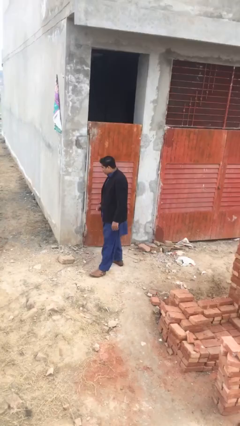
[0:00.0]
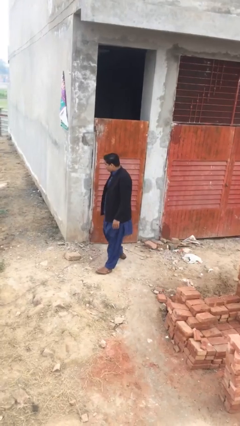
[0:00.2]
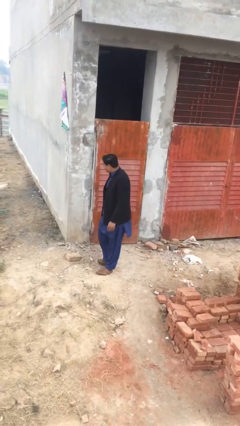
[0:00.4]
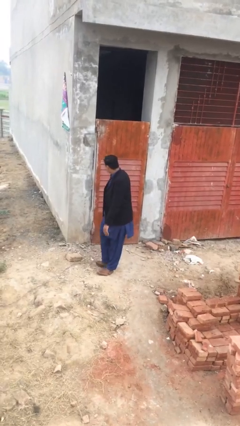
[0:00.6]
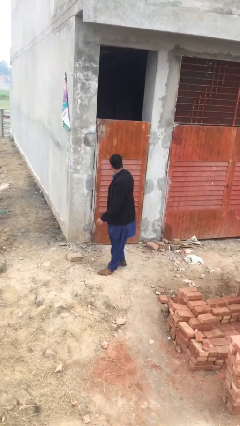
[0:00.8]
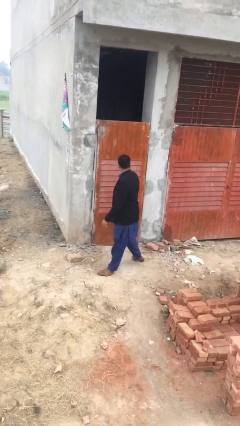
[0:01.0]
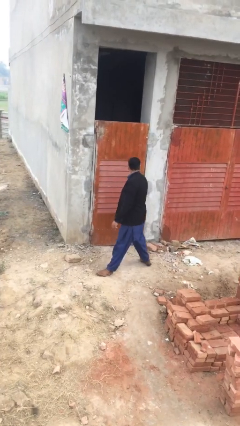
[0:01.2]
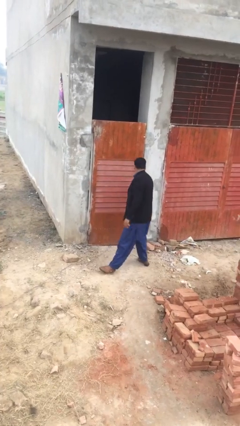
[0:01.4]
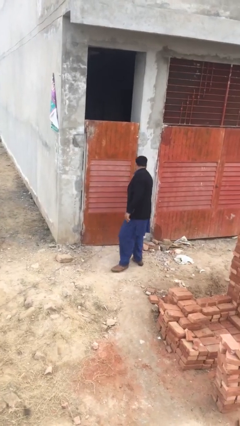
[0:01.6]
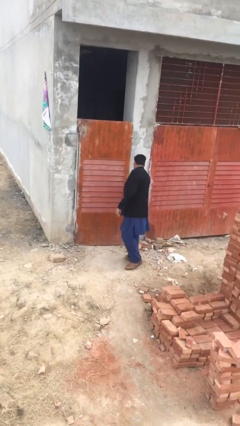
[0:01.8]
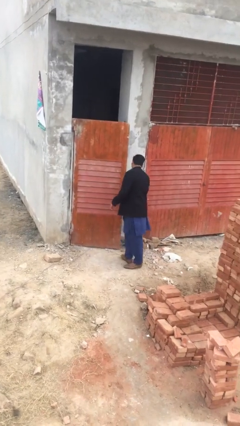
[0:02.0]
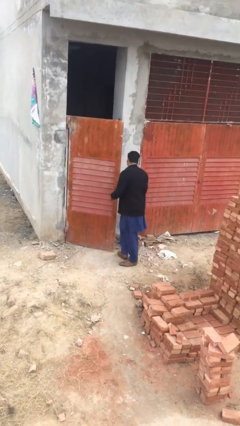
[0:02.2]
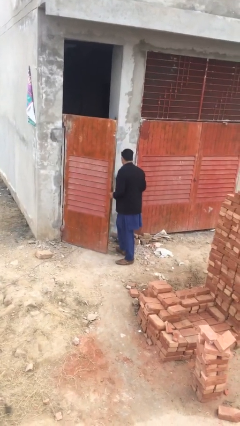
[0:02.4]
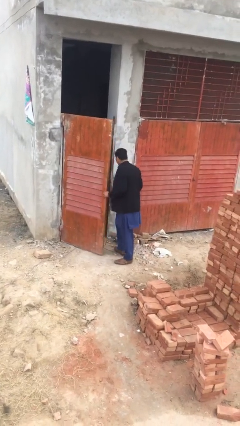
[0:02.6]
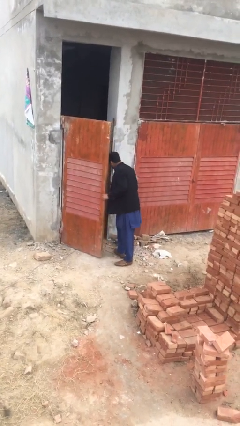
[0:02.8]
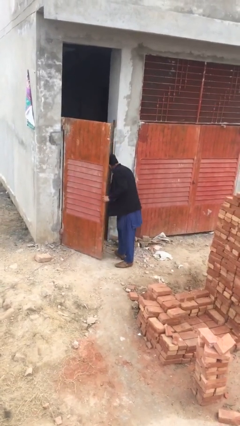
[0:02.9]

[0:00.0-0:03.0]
person opens facility door

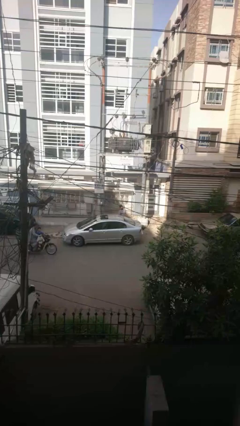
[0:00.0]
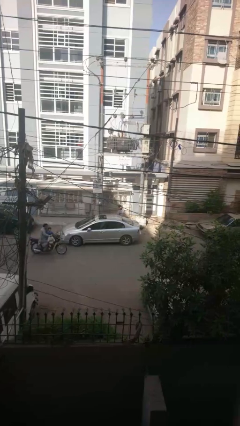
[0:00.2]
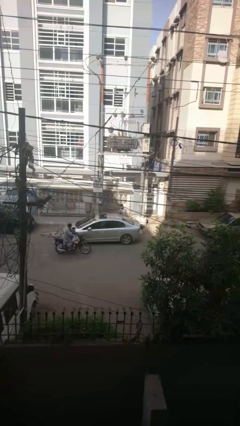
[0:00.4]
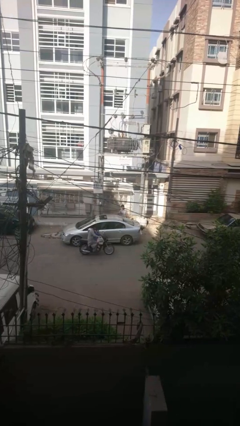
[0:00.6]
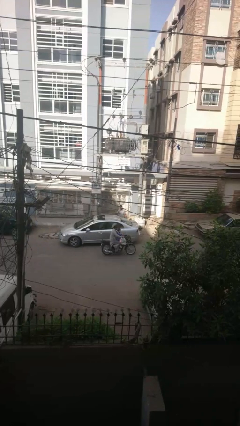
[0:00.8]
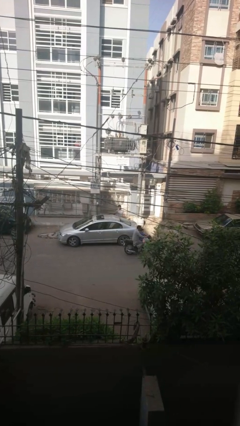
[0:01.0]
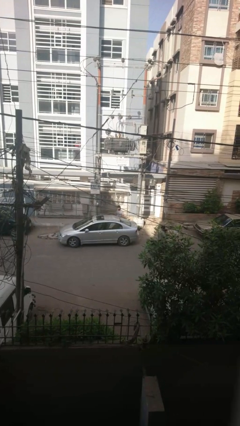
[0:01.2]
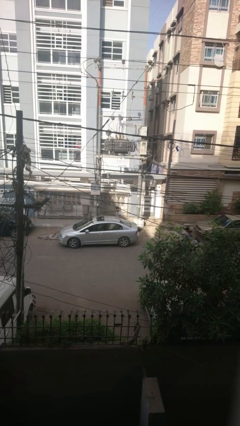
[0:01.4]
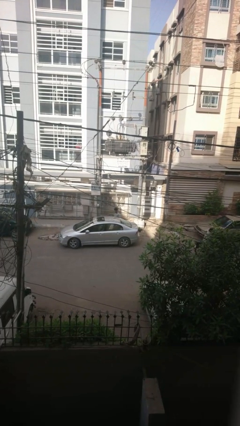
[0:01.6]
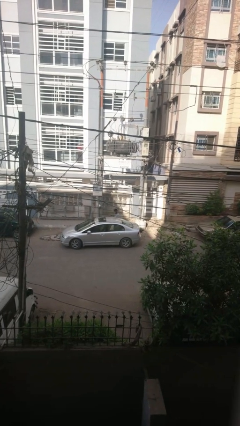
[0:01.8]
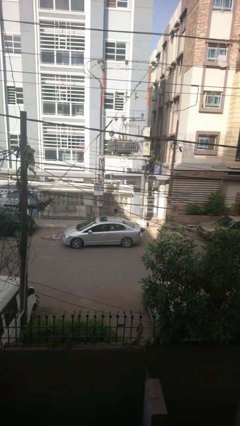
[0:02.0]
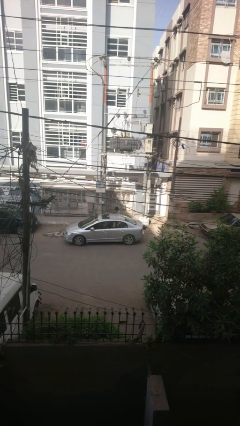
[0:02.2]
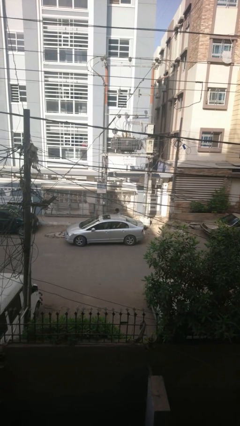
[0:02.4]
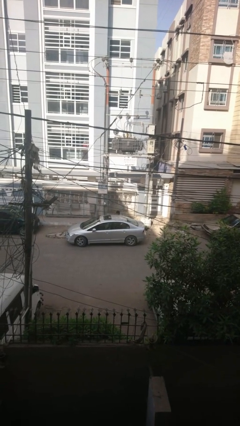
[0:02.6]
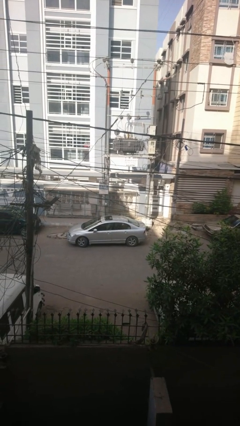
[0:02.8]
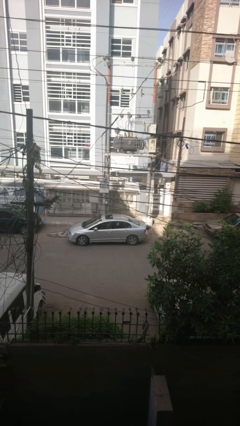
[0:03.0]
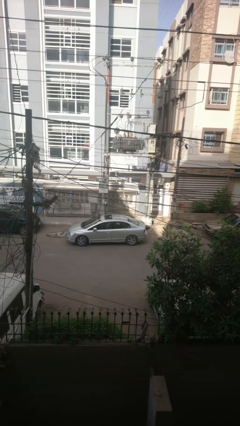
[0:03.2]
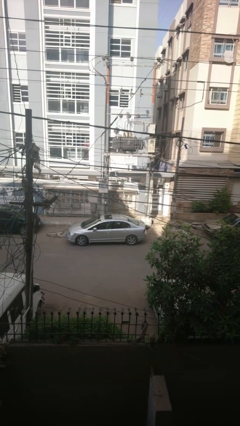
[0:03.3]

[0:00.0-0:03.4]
car picks up person

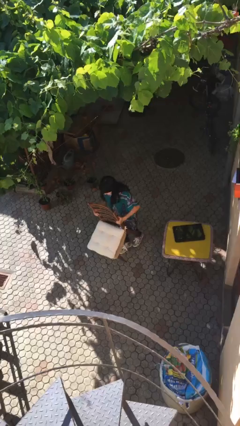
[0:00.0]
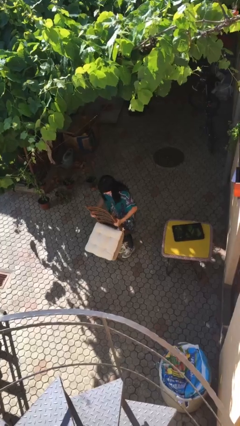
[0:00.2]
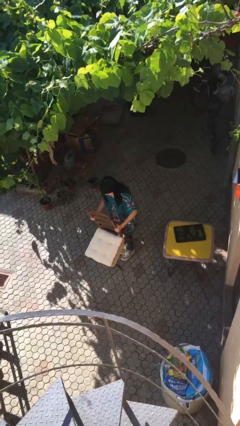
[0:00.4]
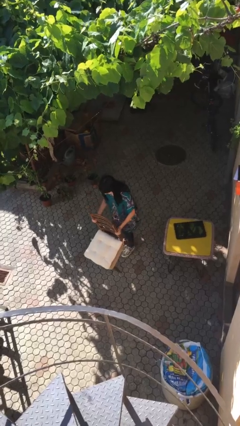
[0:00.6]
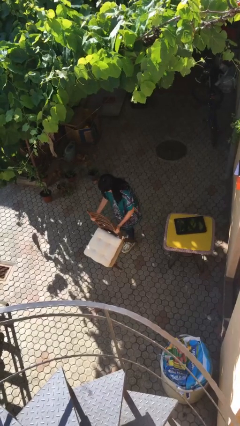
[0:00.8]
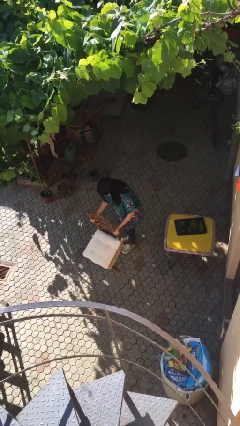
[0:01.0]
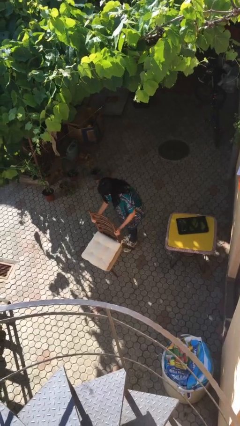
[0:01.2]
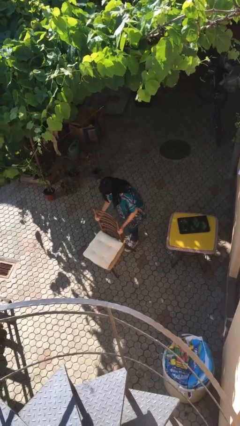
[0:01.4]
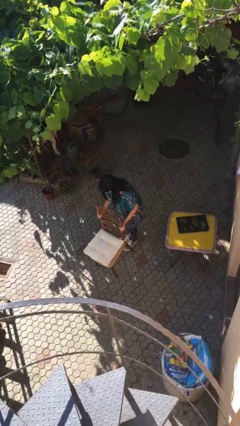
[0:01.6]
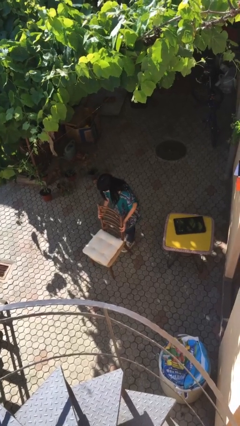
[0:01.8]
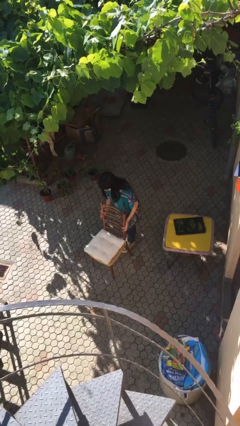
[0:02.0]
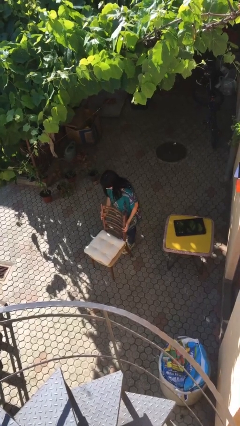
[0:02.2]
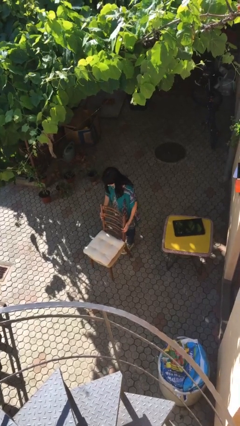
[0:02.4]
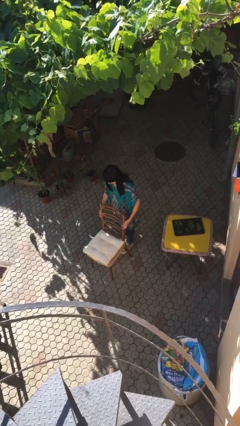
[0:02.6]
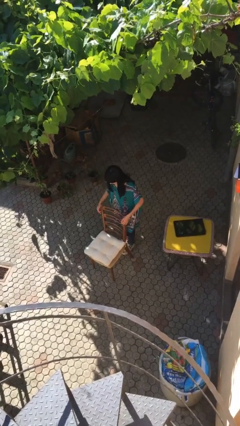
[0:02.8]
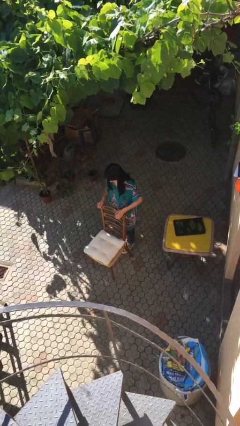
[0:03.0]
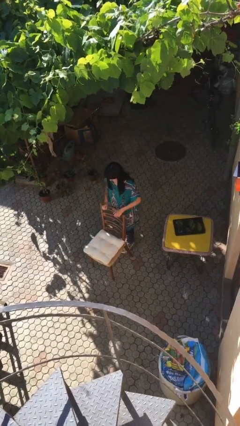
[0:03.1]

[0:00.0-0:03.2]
person puts down object on floor

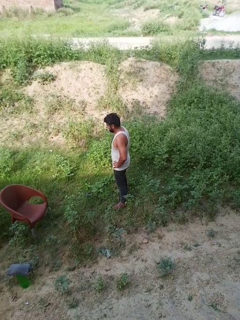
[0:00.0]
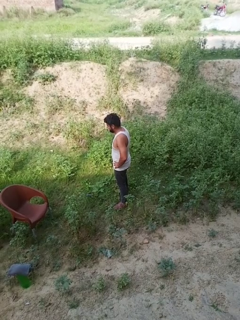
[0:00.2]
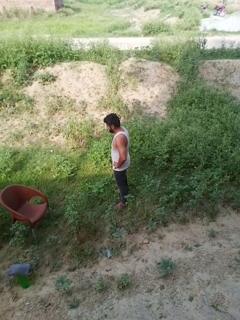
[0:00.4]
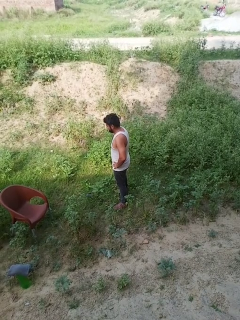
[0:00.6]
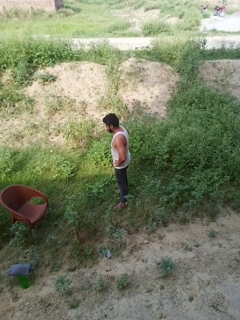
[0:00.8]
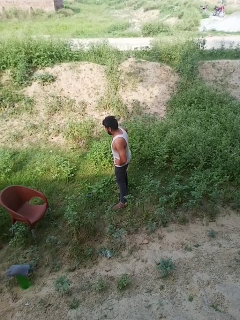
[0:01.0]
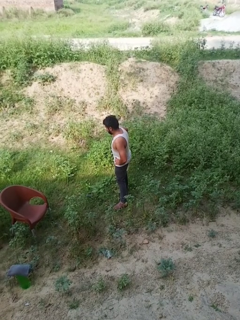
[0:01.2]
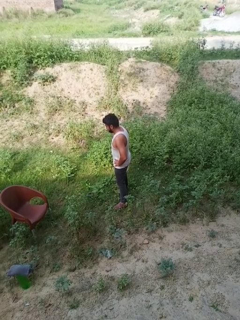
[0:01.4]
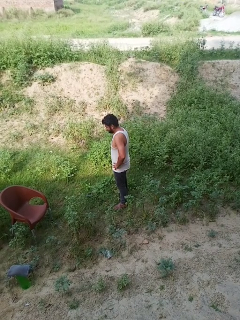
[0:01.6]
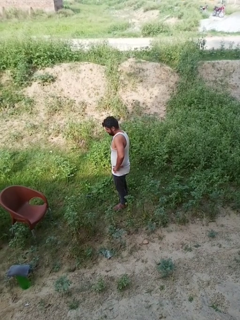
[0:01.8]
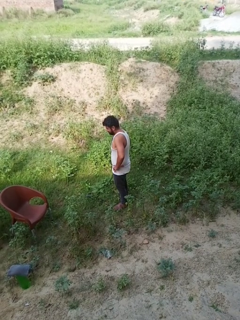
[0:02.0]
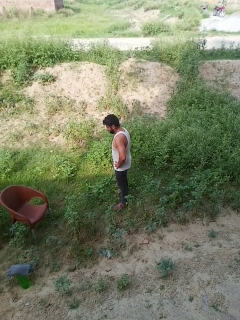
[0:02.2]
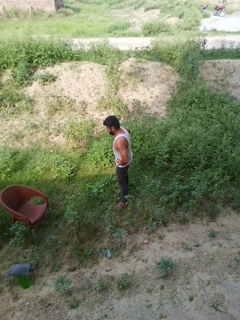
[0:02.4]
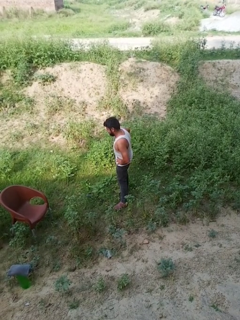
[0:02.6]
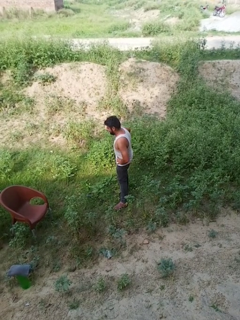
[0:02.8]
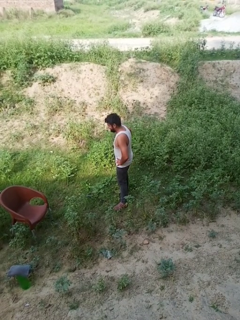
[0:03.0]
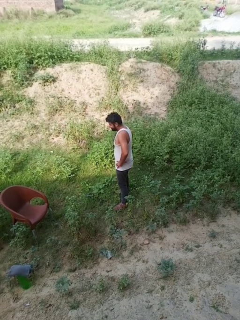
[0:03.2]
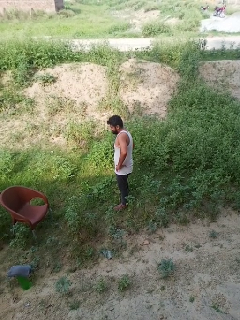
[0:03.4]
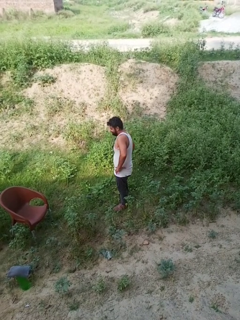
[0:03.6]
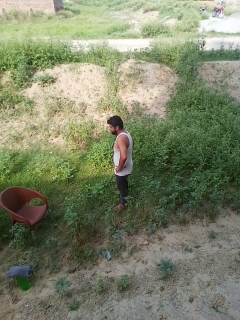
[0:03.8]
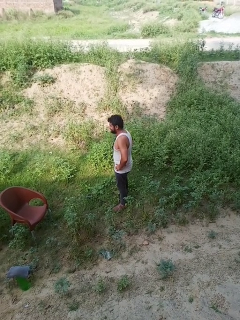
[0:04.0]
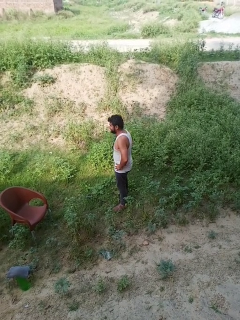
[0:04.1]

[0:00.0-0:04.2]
person wiggles hips

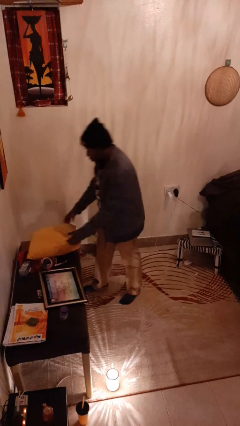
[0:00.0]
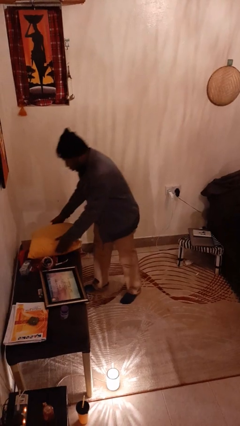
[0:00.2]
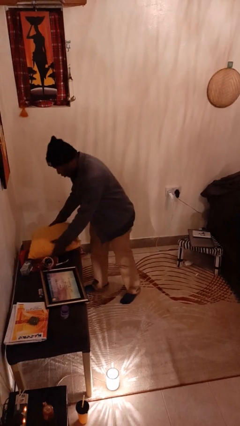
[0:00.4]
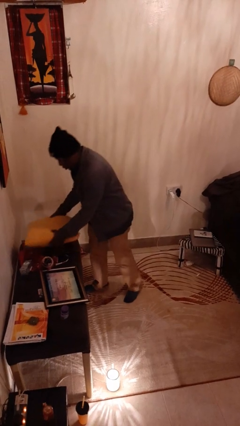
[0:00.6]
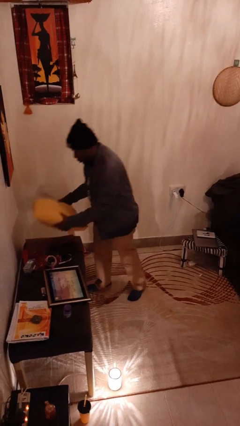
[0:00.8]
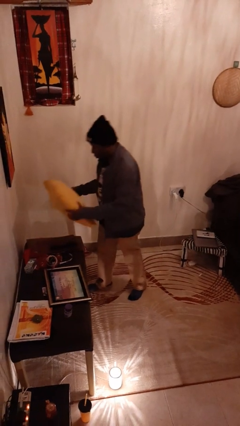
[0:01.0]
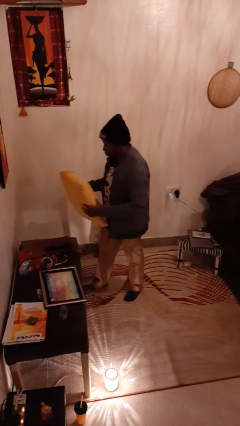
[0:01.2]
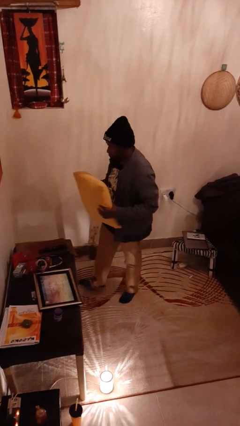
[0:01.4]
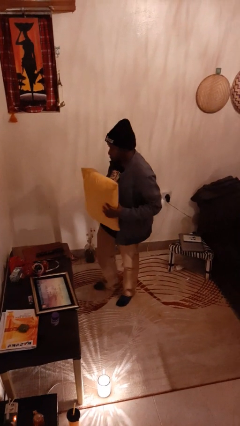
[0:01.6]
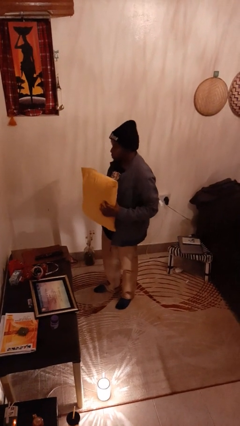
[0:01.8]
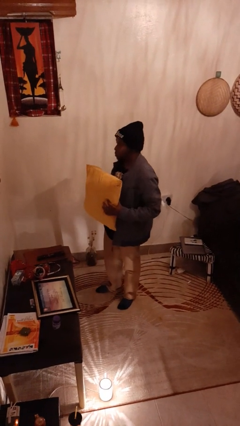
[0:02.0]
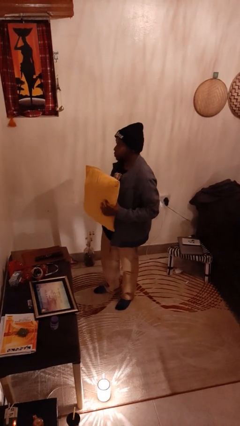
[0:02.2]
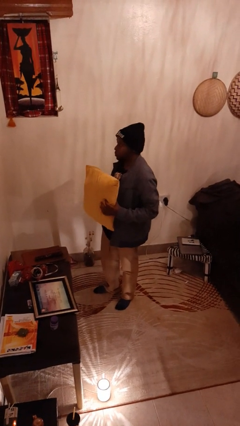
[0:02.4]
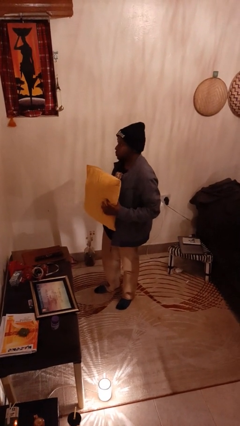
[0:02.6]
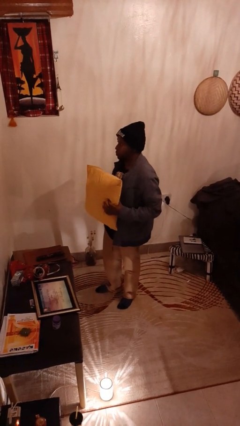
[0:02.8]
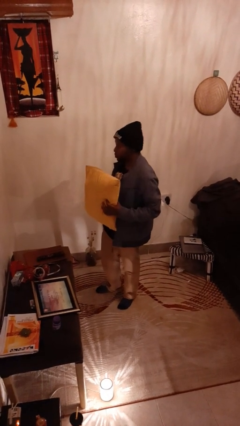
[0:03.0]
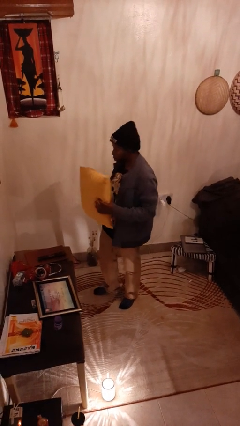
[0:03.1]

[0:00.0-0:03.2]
person picks up object from countertop

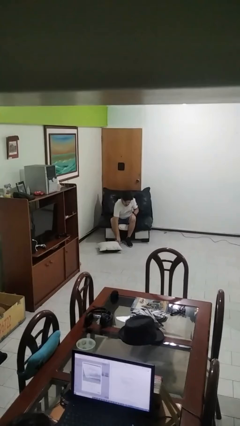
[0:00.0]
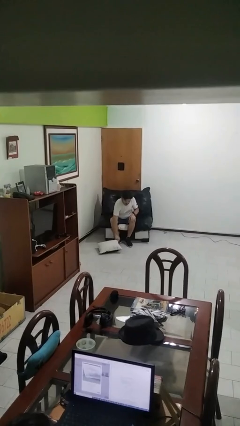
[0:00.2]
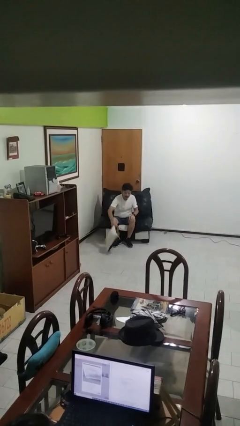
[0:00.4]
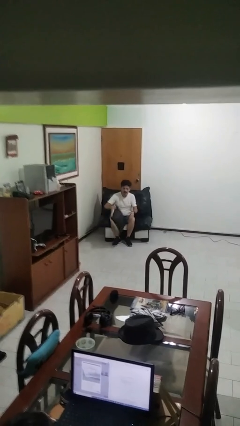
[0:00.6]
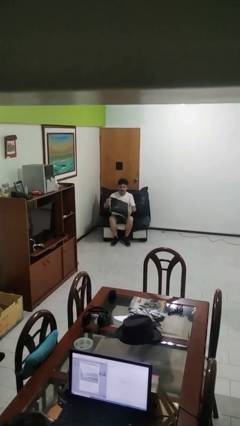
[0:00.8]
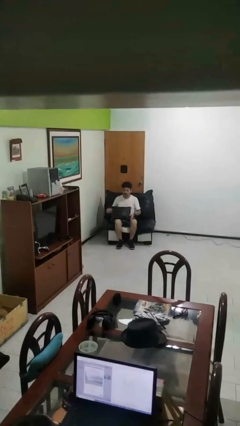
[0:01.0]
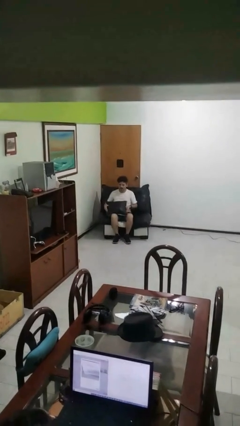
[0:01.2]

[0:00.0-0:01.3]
person picks up object from floor

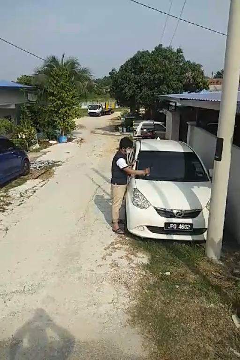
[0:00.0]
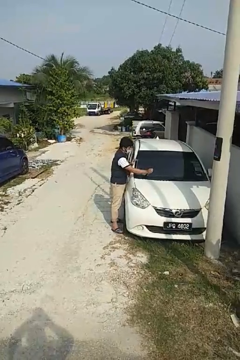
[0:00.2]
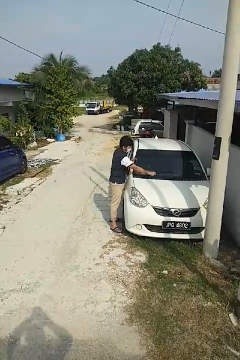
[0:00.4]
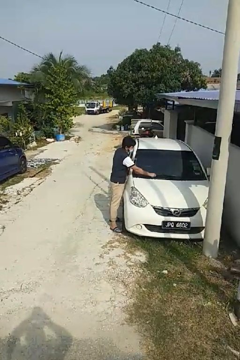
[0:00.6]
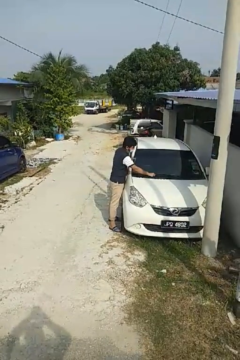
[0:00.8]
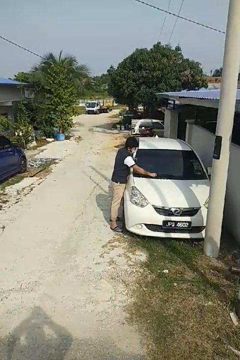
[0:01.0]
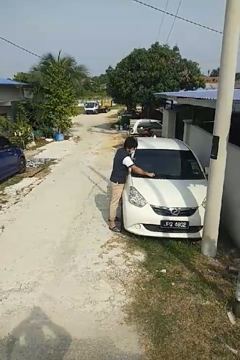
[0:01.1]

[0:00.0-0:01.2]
person flips down car wipers
